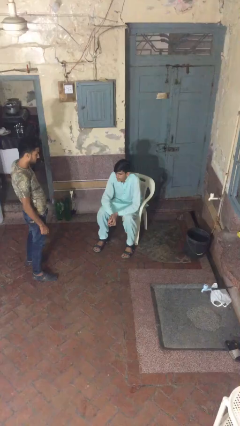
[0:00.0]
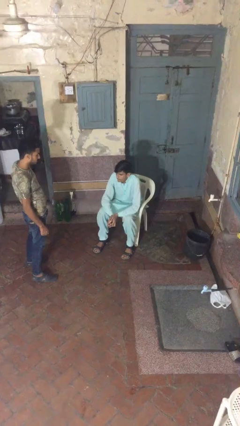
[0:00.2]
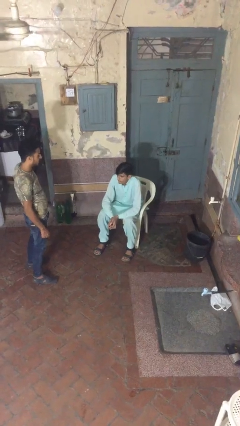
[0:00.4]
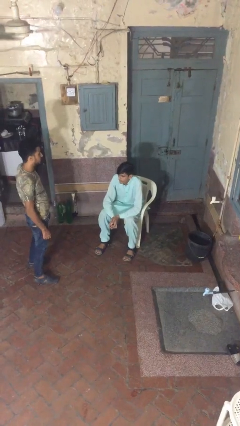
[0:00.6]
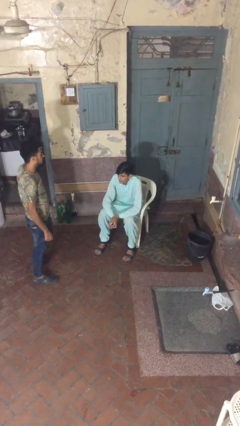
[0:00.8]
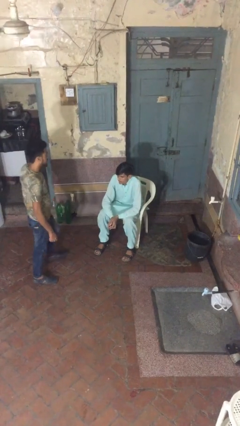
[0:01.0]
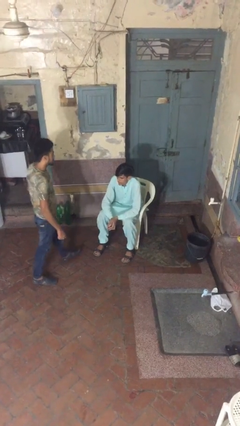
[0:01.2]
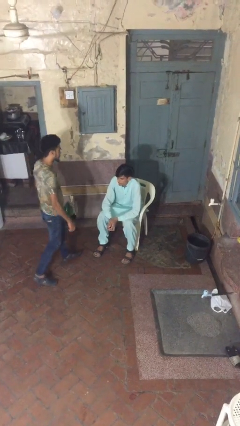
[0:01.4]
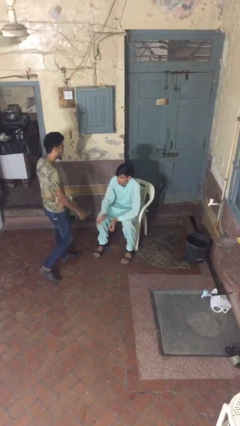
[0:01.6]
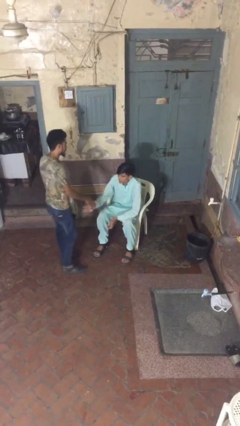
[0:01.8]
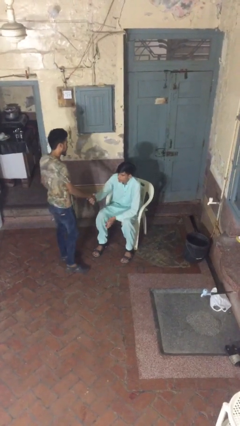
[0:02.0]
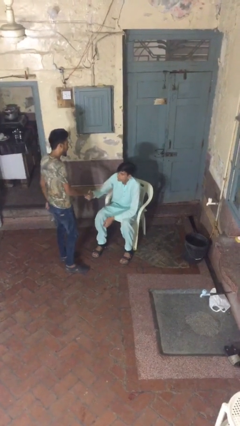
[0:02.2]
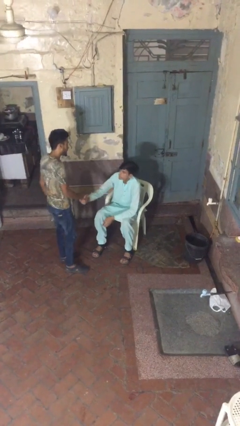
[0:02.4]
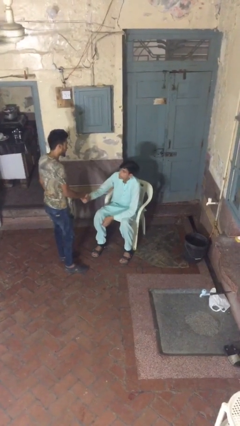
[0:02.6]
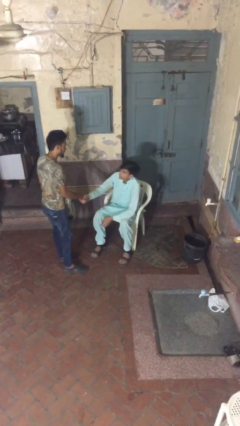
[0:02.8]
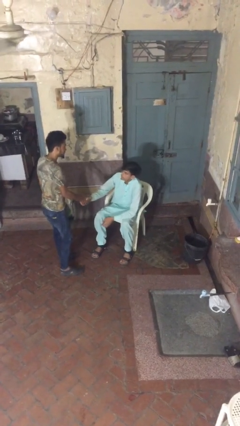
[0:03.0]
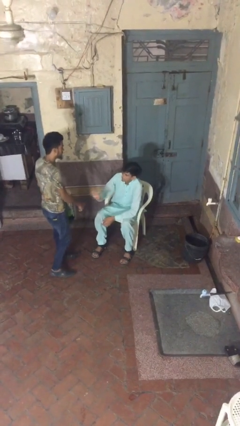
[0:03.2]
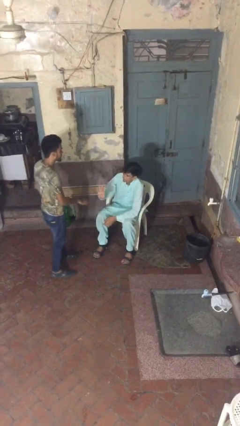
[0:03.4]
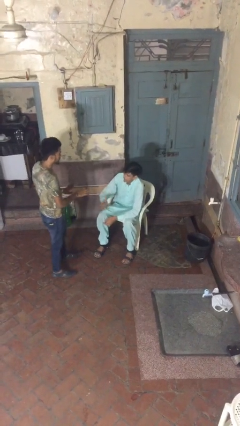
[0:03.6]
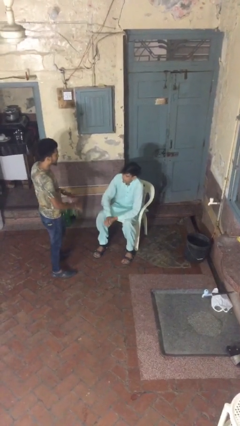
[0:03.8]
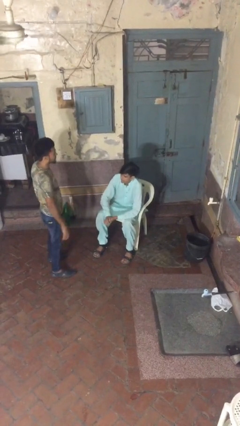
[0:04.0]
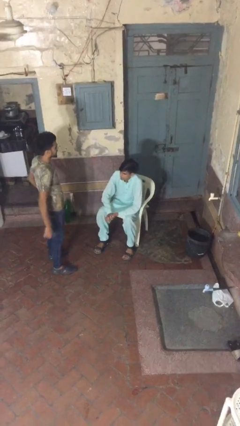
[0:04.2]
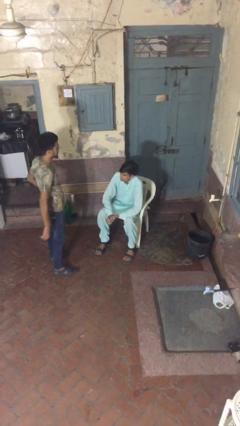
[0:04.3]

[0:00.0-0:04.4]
person shakes hand

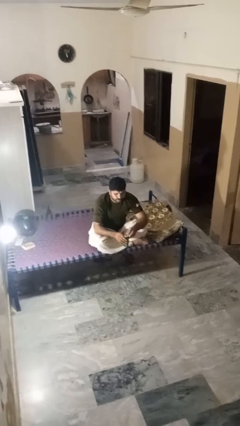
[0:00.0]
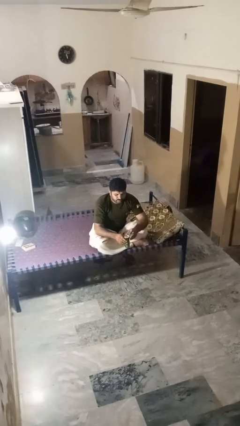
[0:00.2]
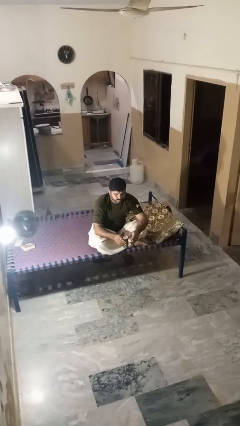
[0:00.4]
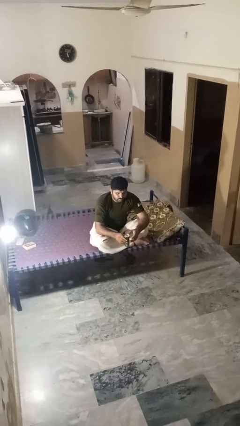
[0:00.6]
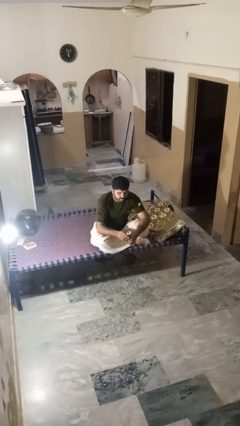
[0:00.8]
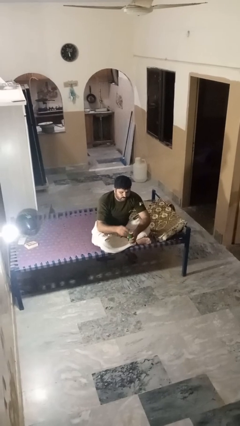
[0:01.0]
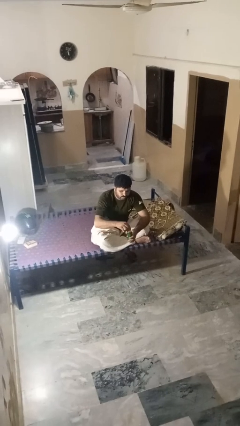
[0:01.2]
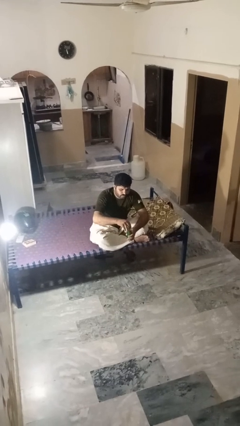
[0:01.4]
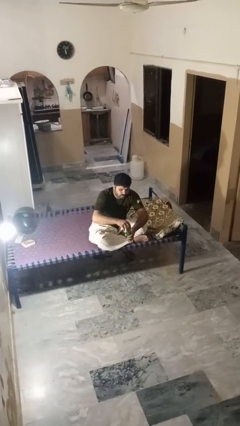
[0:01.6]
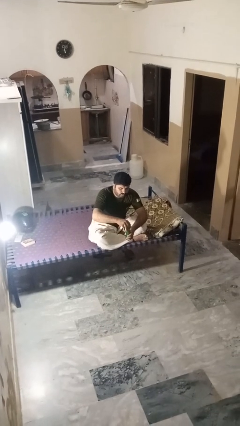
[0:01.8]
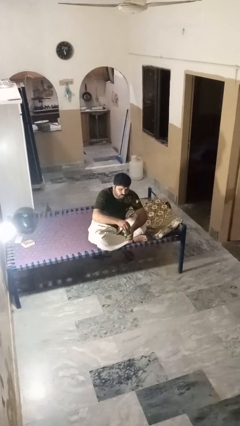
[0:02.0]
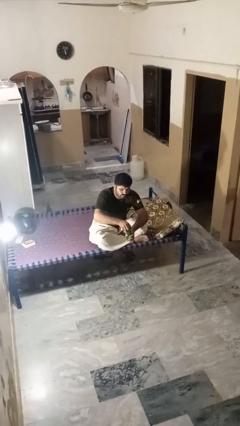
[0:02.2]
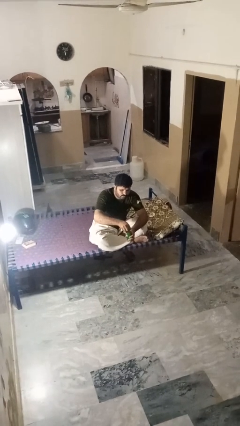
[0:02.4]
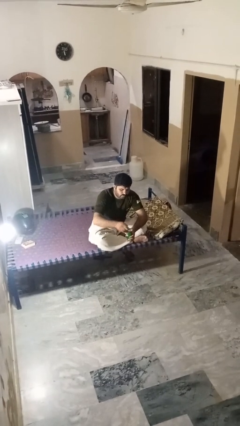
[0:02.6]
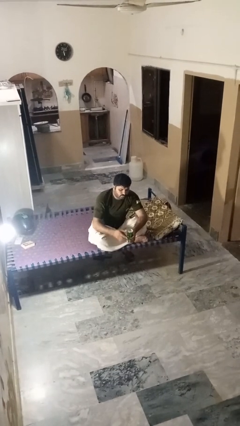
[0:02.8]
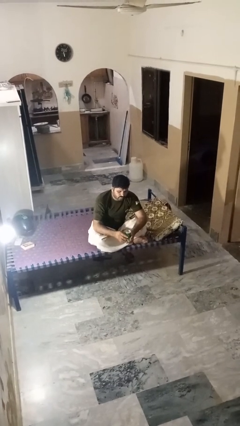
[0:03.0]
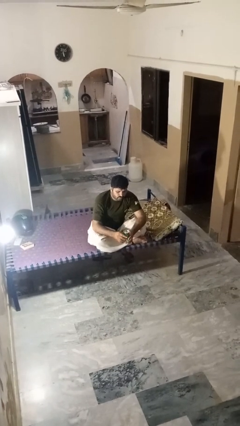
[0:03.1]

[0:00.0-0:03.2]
person opens beverage can

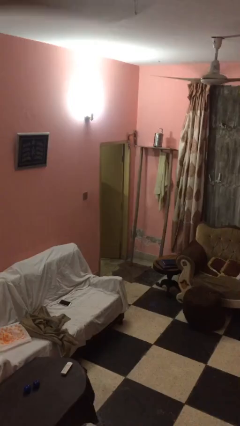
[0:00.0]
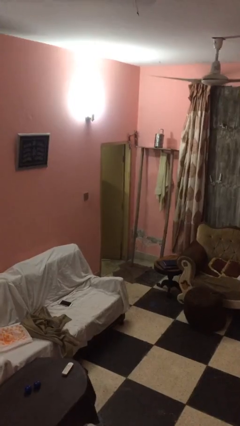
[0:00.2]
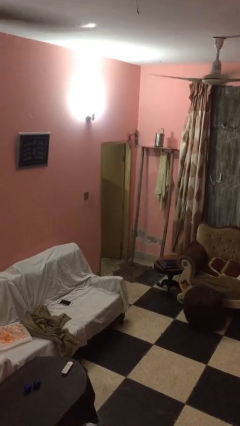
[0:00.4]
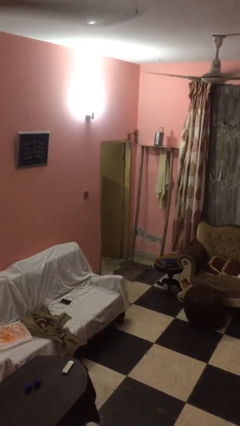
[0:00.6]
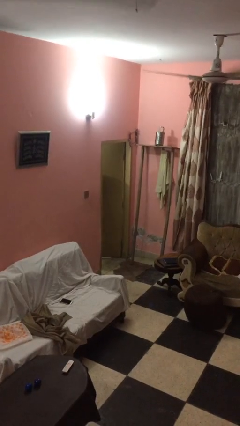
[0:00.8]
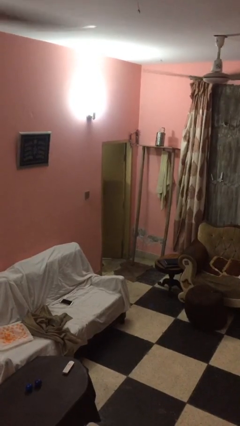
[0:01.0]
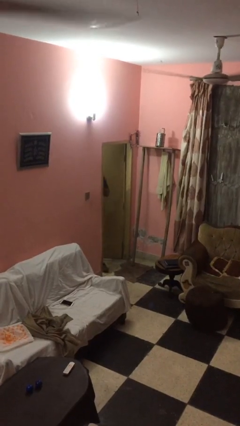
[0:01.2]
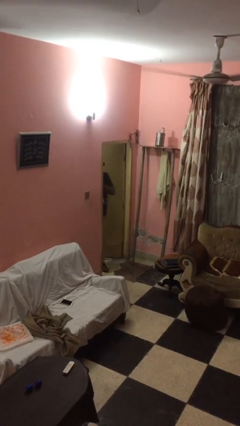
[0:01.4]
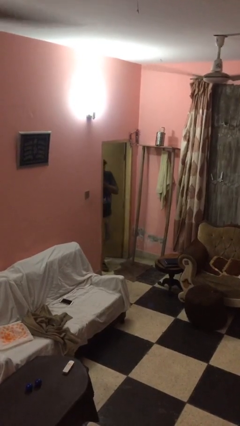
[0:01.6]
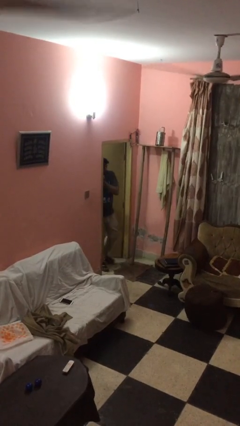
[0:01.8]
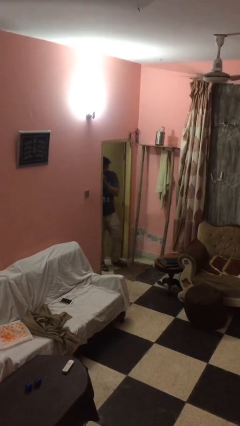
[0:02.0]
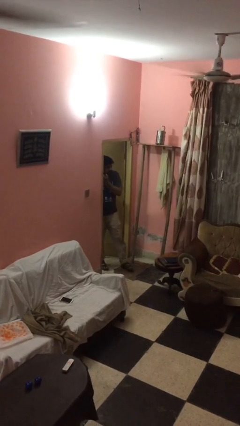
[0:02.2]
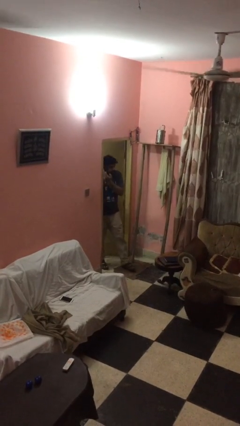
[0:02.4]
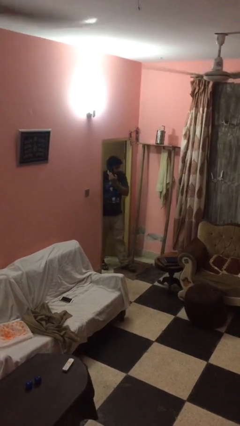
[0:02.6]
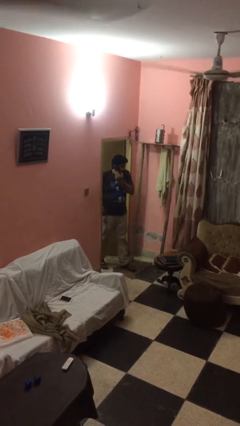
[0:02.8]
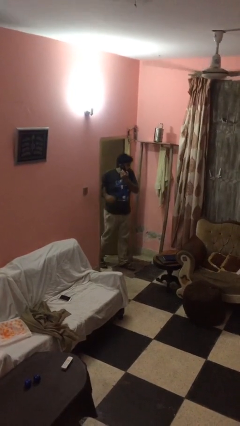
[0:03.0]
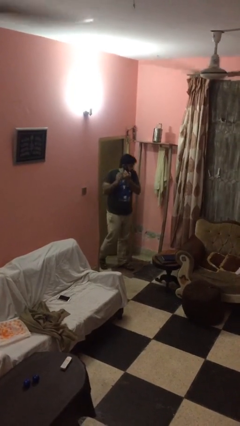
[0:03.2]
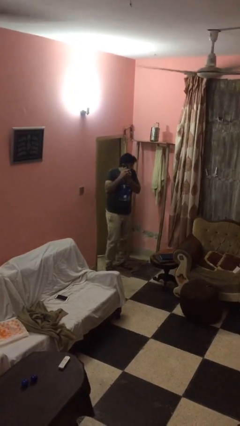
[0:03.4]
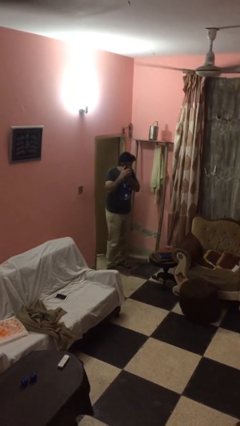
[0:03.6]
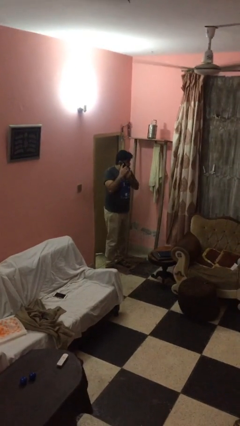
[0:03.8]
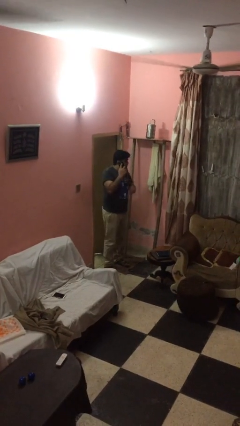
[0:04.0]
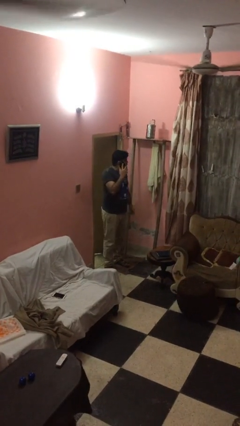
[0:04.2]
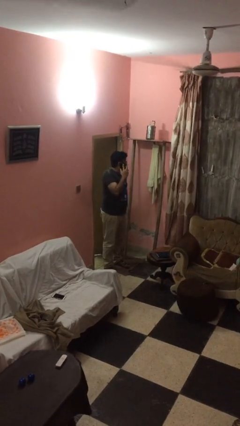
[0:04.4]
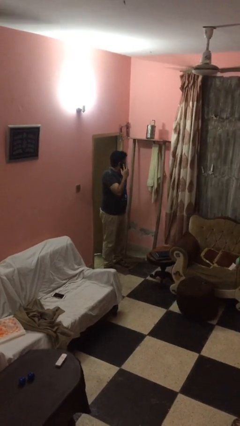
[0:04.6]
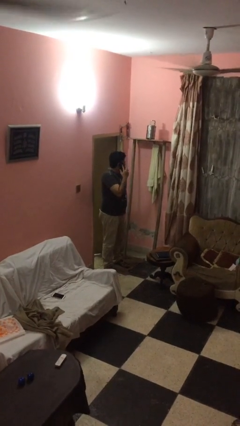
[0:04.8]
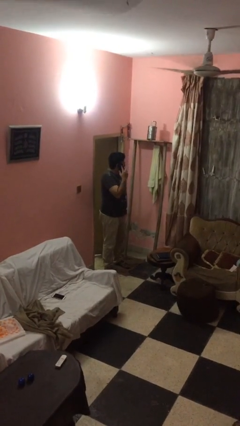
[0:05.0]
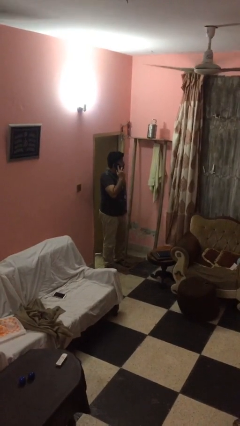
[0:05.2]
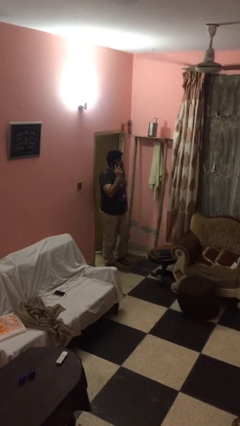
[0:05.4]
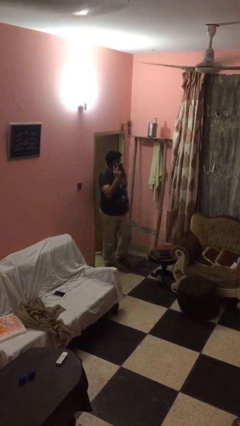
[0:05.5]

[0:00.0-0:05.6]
person enters scene through structure

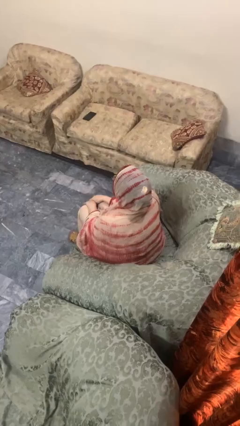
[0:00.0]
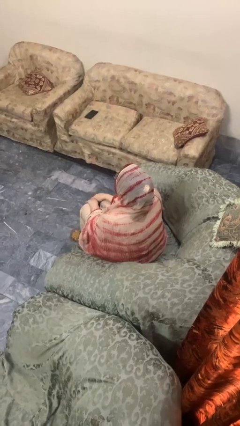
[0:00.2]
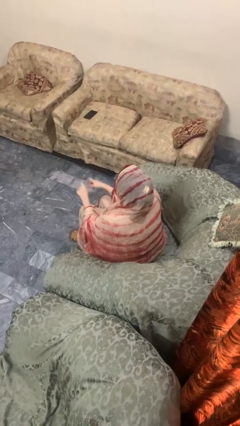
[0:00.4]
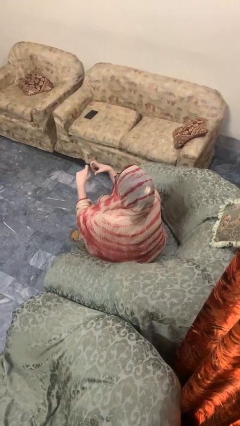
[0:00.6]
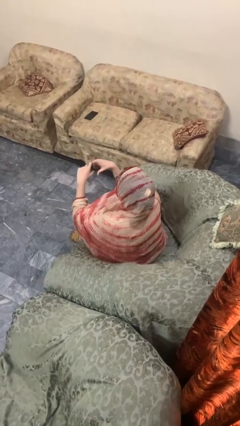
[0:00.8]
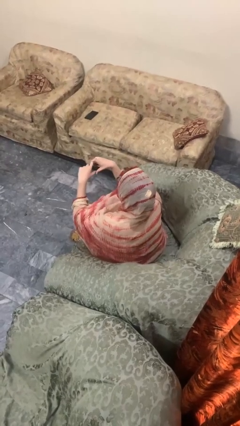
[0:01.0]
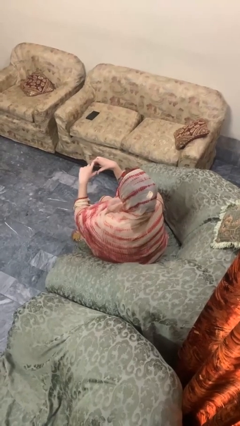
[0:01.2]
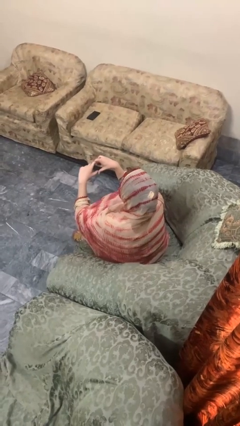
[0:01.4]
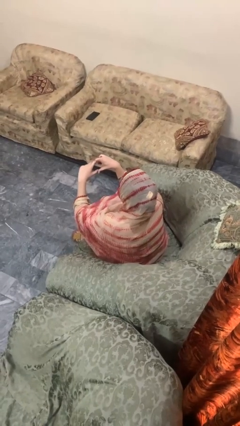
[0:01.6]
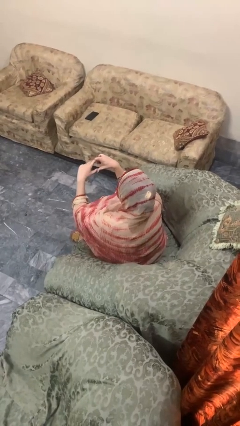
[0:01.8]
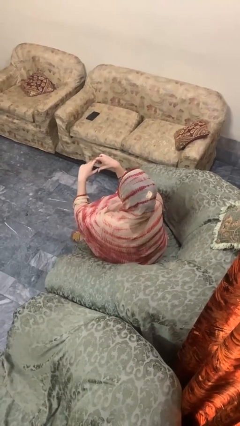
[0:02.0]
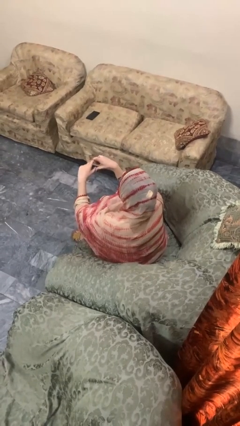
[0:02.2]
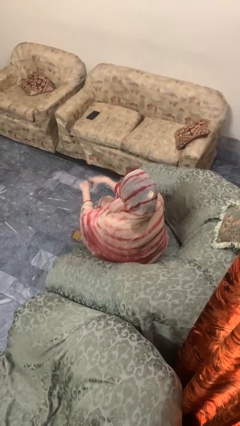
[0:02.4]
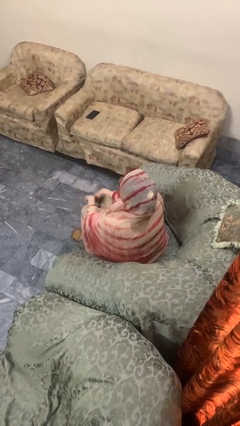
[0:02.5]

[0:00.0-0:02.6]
person gestures heart

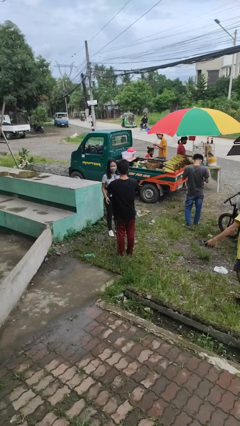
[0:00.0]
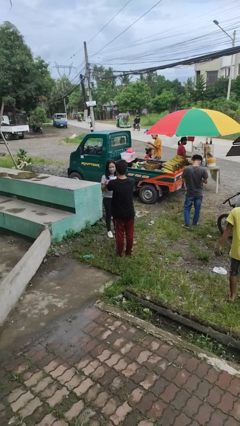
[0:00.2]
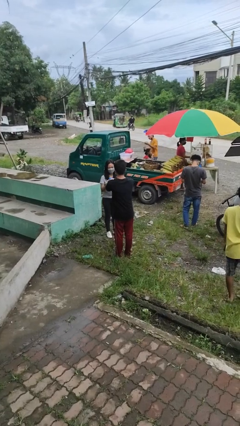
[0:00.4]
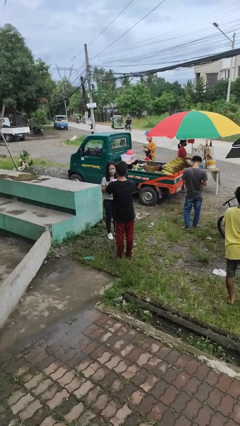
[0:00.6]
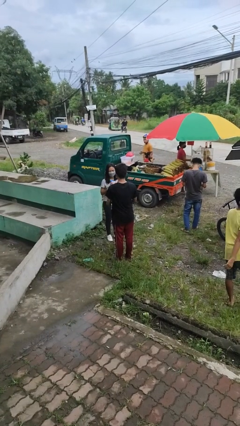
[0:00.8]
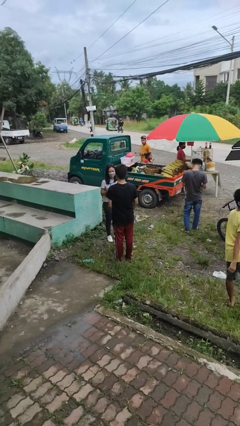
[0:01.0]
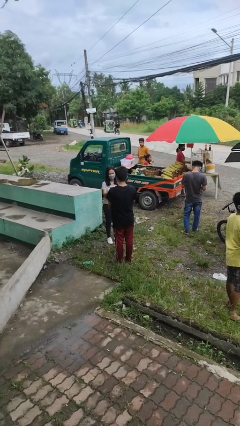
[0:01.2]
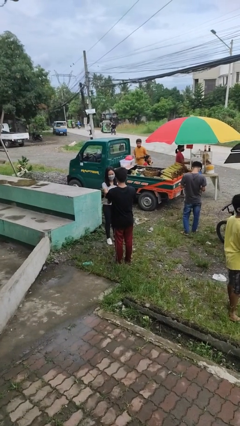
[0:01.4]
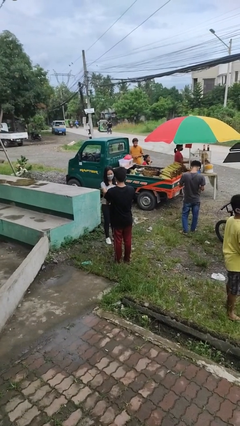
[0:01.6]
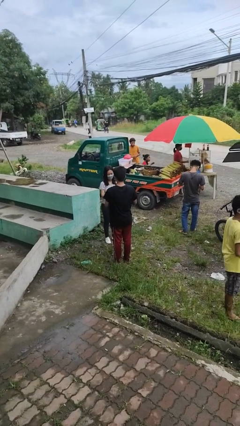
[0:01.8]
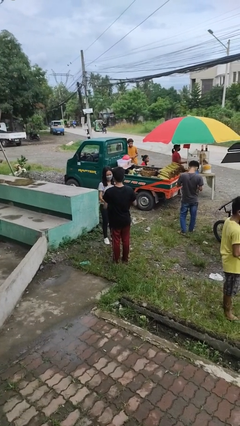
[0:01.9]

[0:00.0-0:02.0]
person transfers object to person
